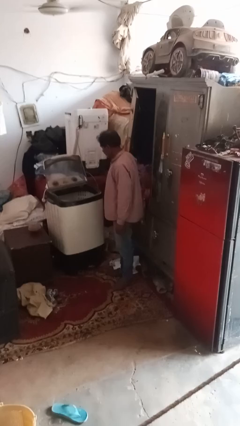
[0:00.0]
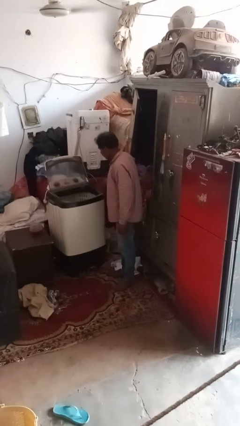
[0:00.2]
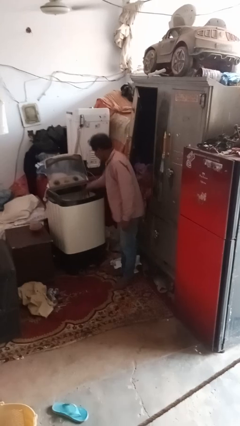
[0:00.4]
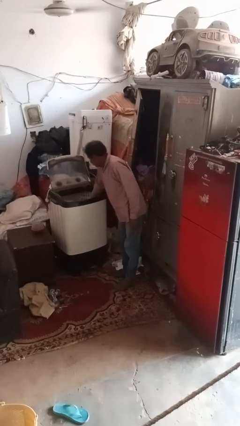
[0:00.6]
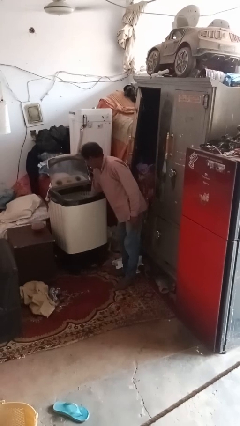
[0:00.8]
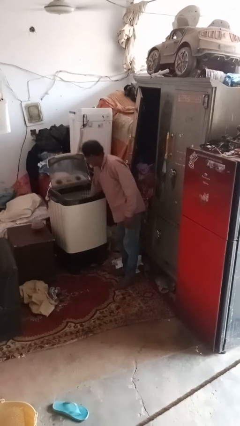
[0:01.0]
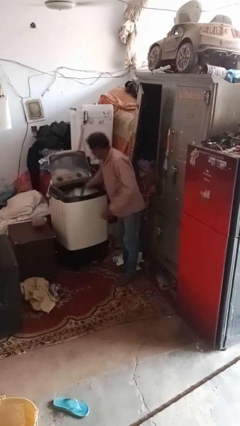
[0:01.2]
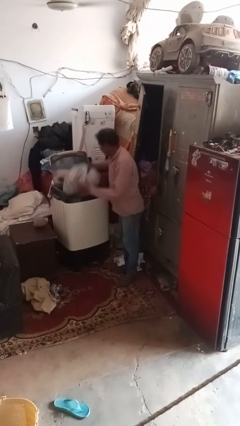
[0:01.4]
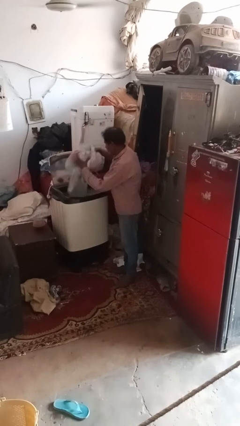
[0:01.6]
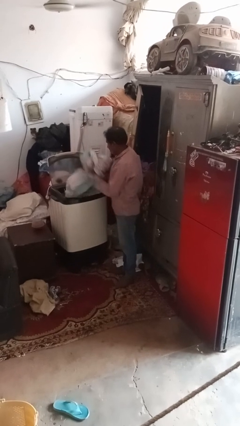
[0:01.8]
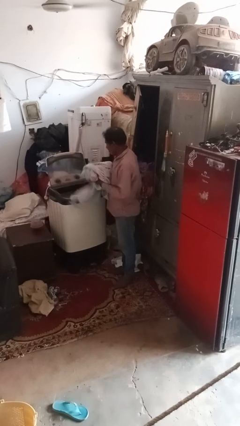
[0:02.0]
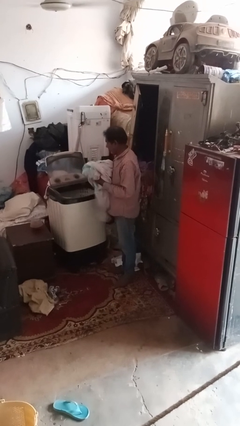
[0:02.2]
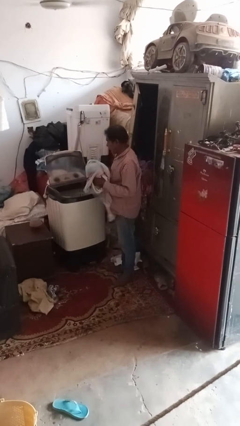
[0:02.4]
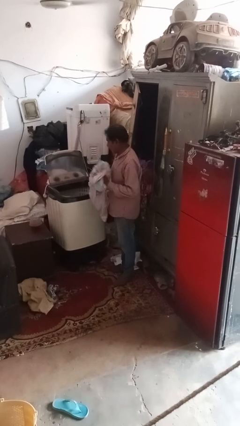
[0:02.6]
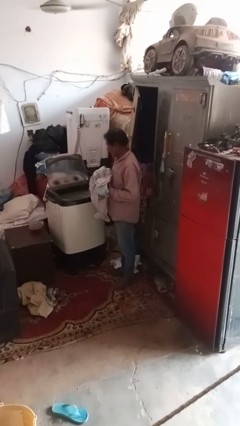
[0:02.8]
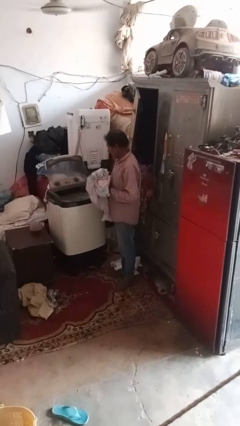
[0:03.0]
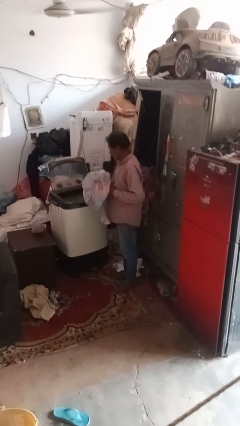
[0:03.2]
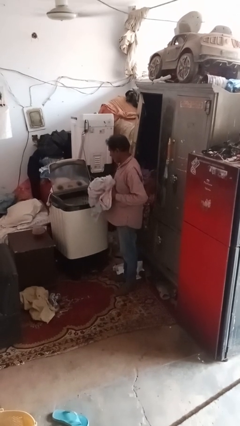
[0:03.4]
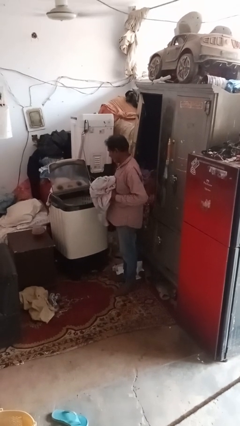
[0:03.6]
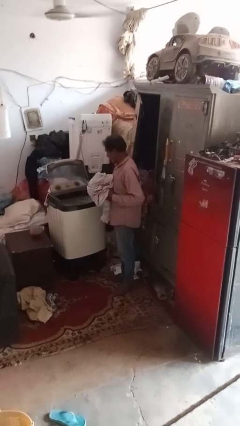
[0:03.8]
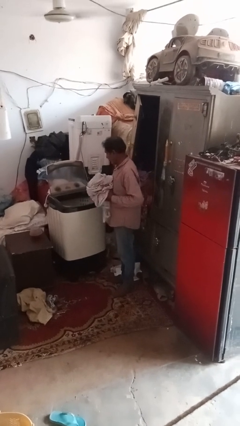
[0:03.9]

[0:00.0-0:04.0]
person unloads clotheswasher

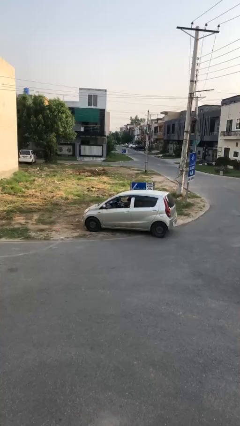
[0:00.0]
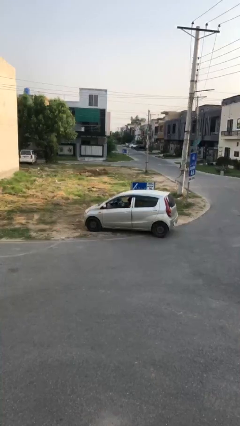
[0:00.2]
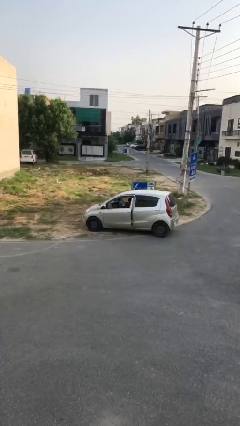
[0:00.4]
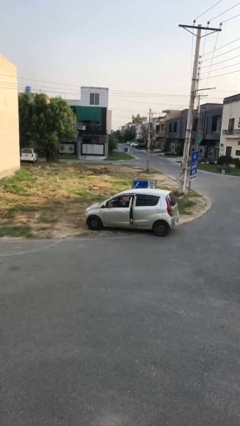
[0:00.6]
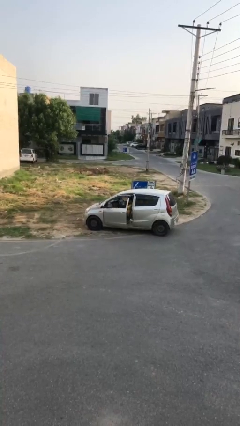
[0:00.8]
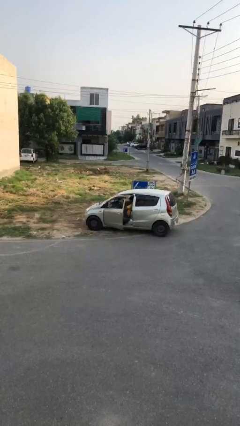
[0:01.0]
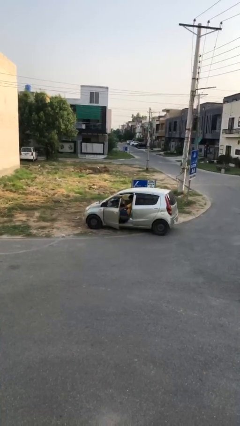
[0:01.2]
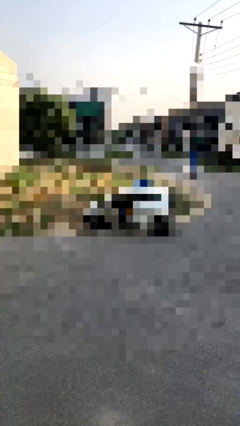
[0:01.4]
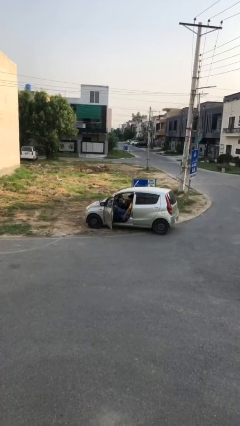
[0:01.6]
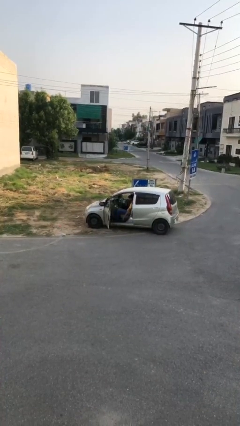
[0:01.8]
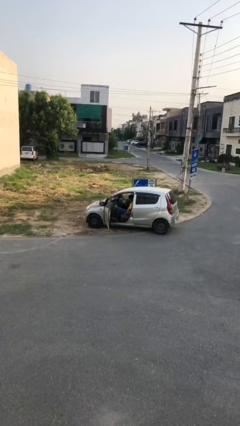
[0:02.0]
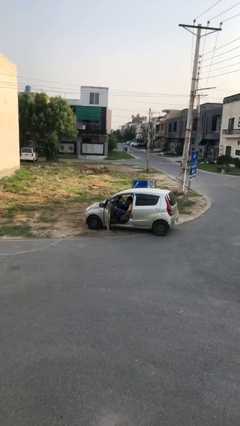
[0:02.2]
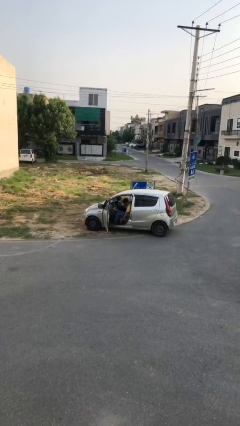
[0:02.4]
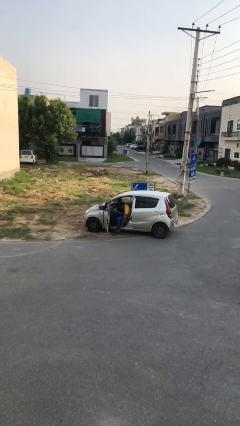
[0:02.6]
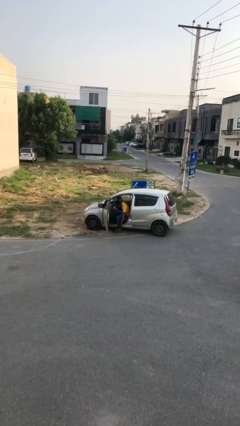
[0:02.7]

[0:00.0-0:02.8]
person opens car door

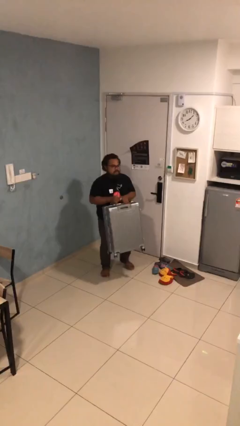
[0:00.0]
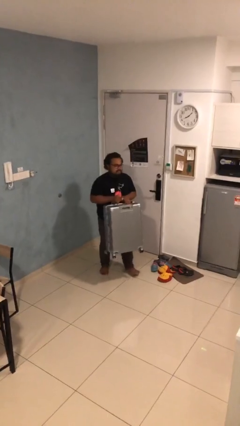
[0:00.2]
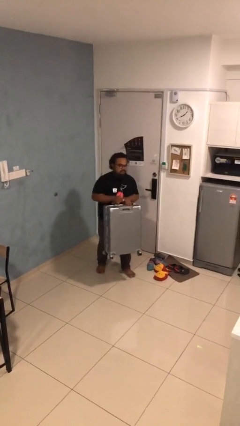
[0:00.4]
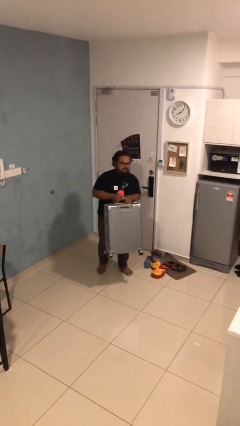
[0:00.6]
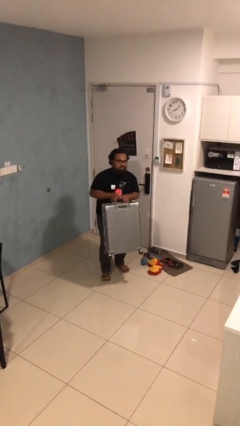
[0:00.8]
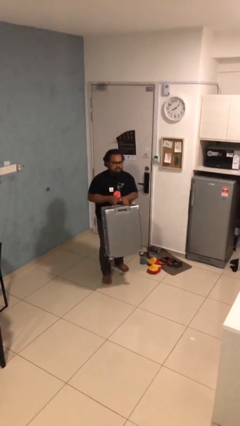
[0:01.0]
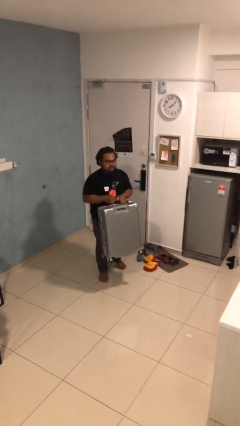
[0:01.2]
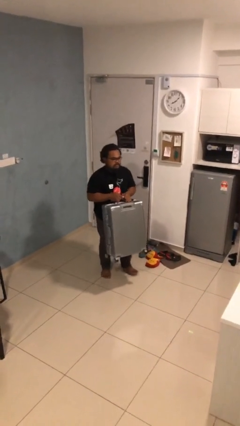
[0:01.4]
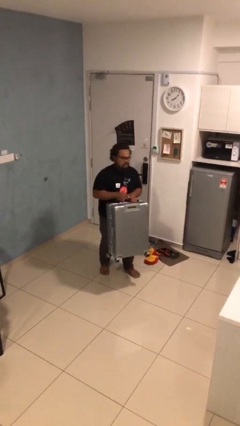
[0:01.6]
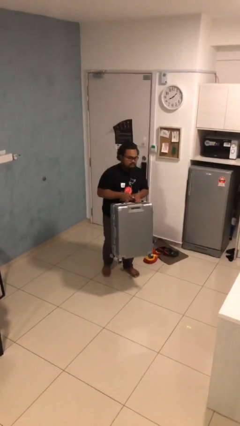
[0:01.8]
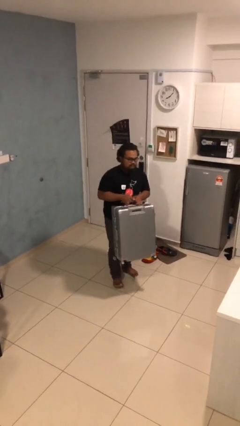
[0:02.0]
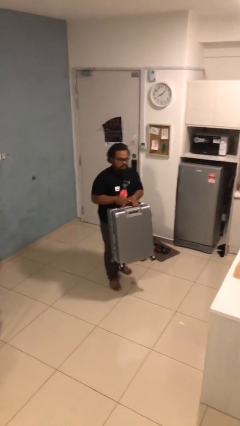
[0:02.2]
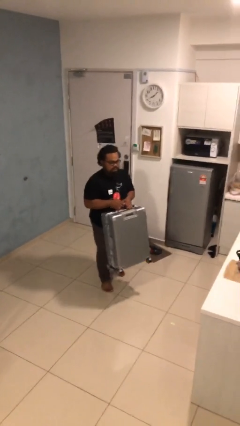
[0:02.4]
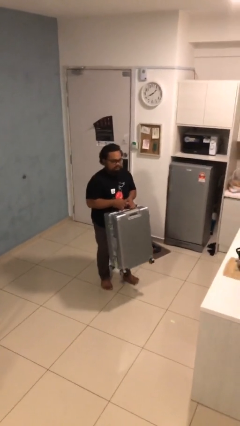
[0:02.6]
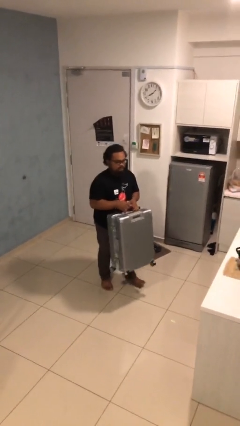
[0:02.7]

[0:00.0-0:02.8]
person carries heavy object

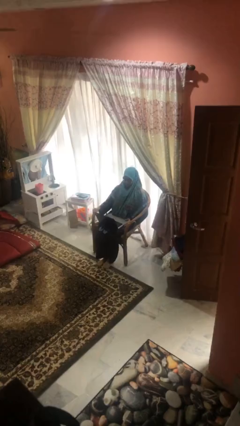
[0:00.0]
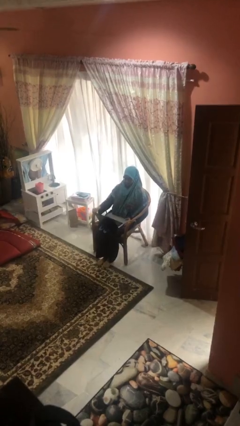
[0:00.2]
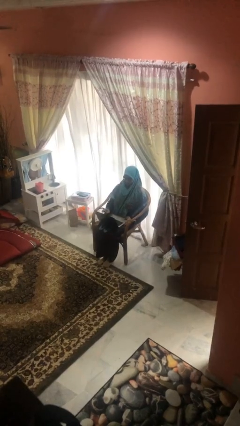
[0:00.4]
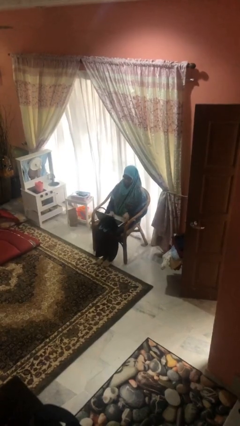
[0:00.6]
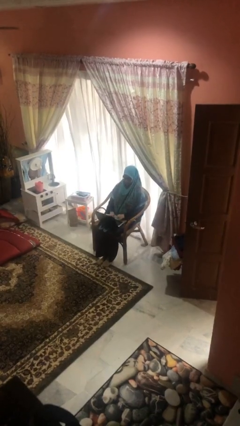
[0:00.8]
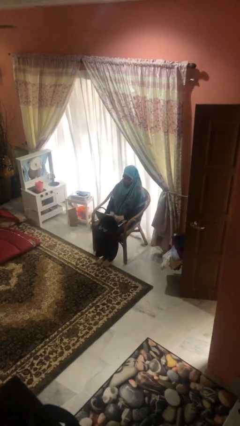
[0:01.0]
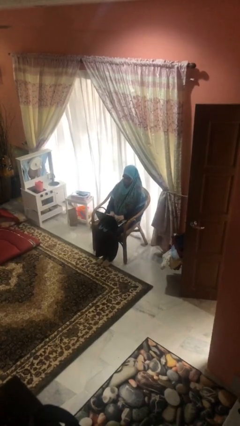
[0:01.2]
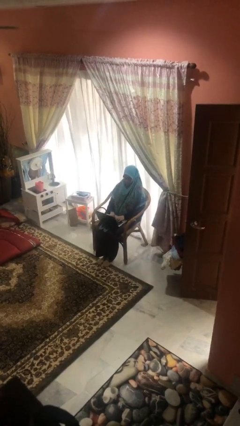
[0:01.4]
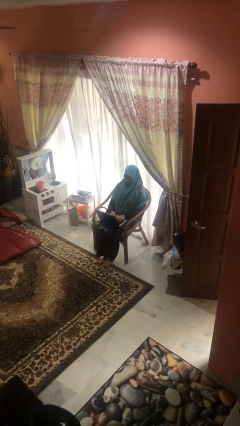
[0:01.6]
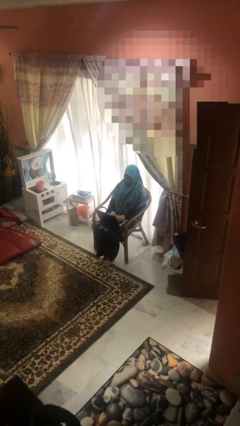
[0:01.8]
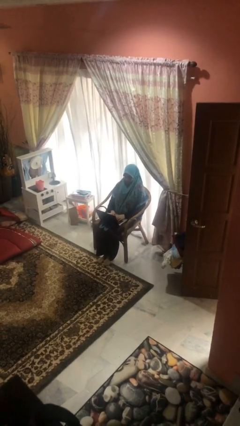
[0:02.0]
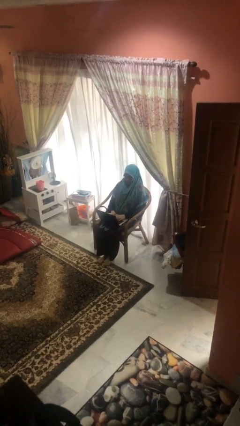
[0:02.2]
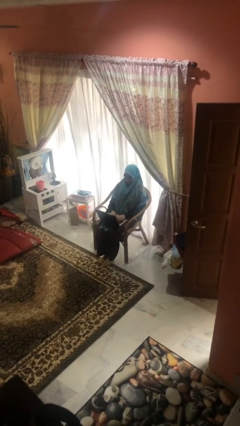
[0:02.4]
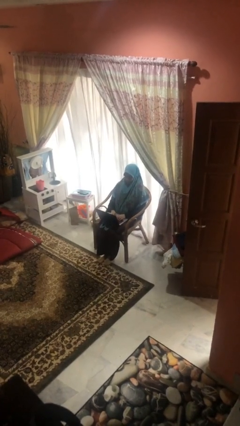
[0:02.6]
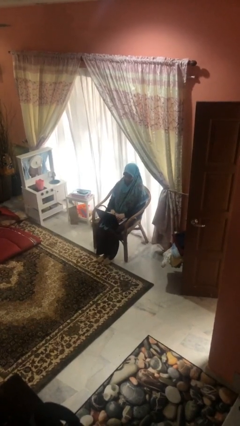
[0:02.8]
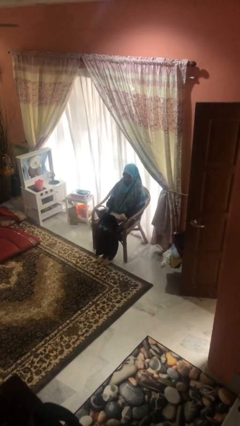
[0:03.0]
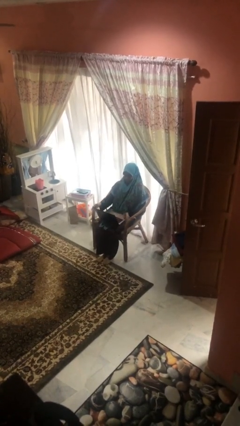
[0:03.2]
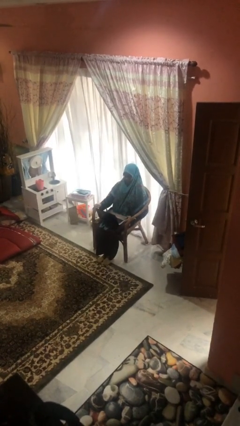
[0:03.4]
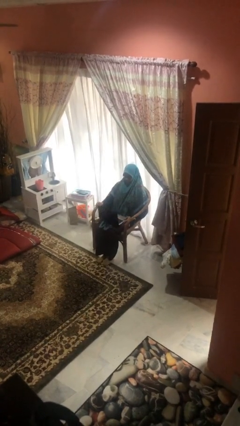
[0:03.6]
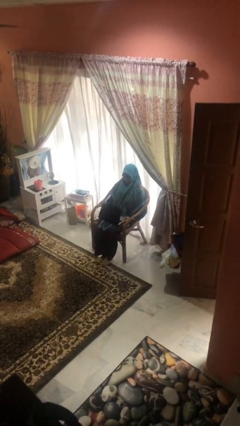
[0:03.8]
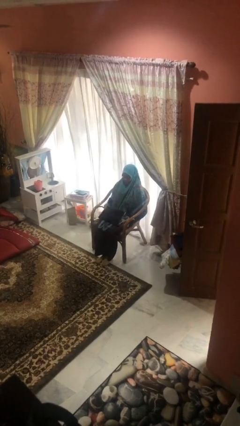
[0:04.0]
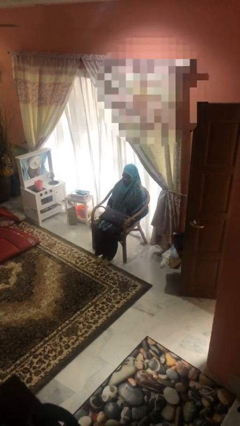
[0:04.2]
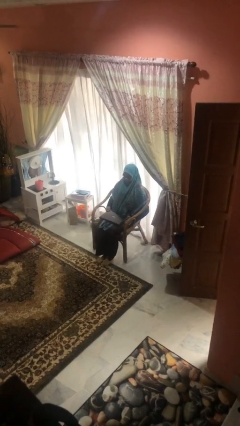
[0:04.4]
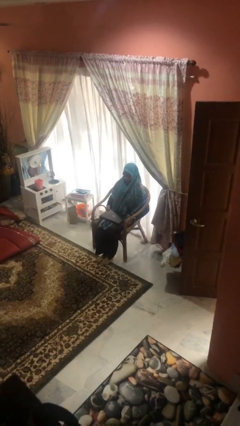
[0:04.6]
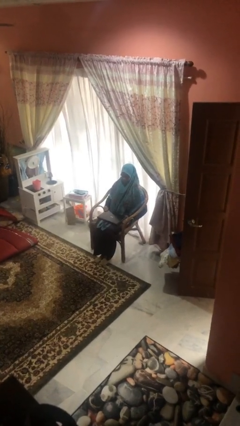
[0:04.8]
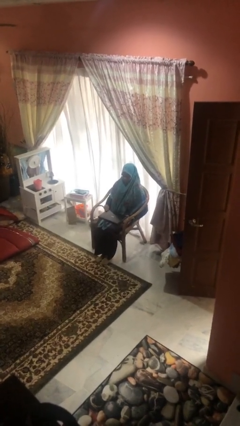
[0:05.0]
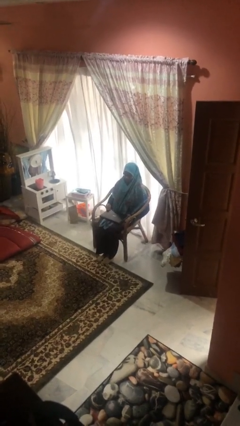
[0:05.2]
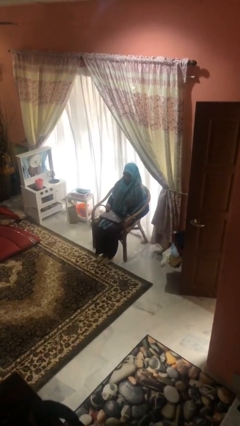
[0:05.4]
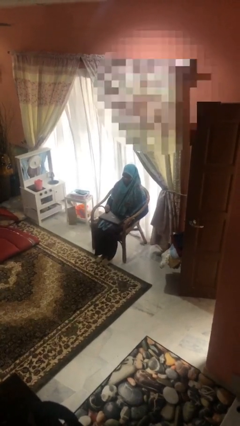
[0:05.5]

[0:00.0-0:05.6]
person interacts with laptop

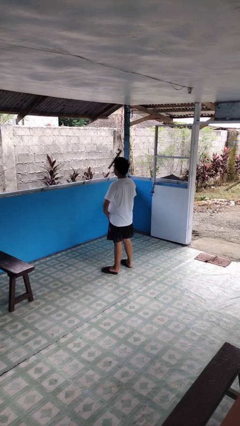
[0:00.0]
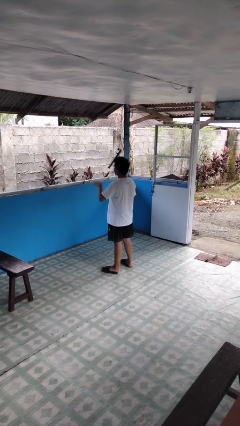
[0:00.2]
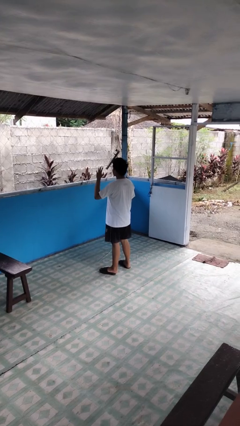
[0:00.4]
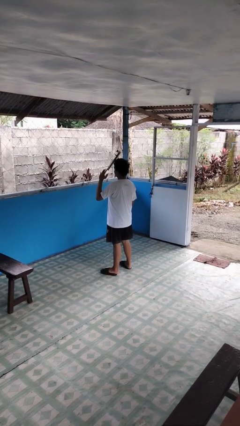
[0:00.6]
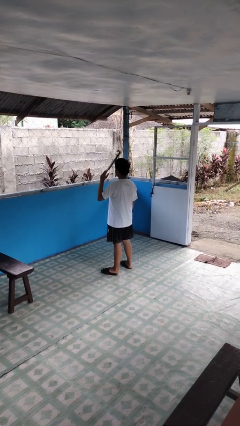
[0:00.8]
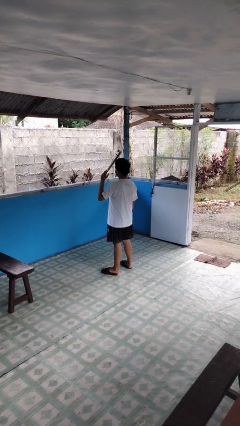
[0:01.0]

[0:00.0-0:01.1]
person gestures number five

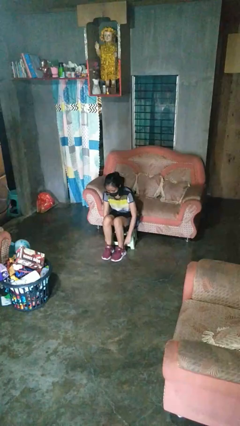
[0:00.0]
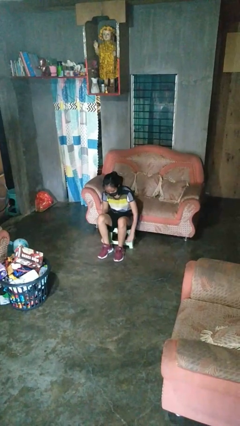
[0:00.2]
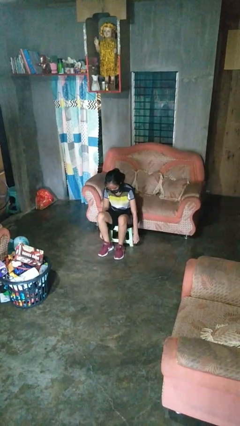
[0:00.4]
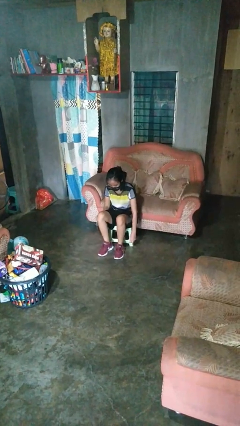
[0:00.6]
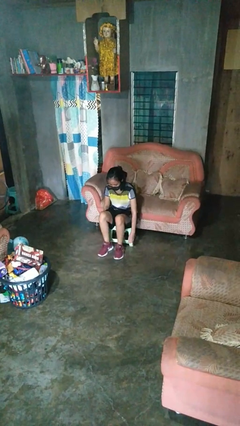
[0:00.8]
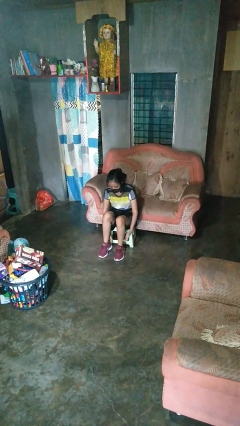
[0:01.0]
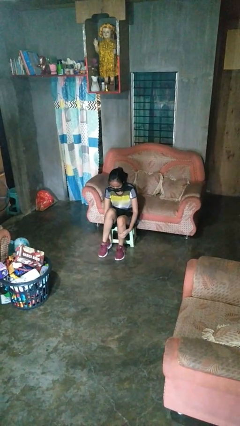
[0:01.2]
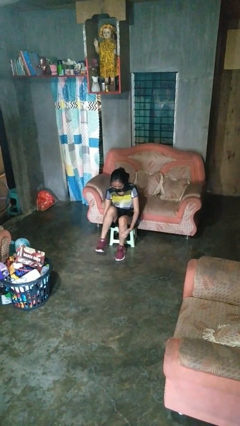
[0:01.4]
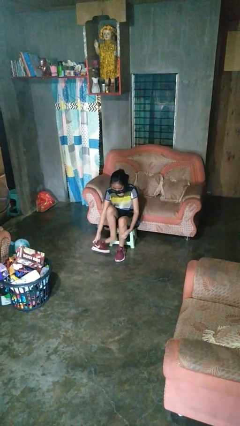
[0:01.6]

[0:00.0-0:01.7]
person takes off shoes
